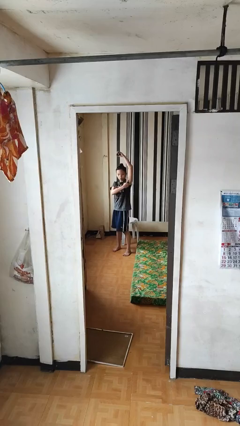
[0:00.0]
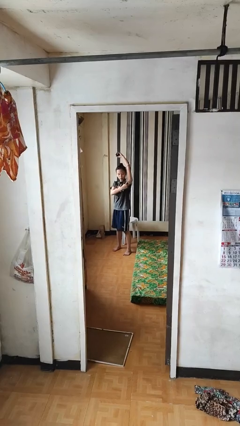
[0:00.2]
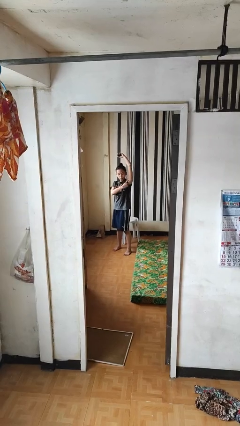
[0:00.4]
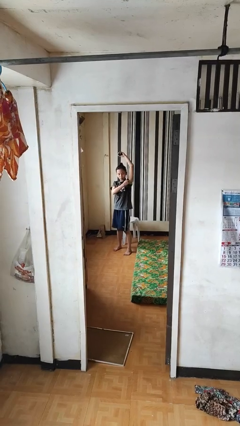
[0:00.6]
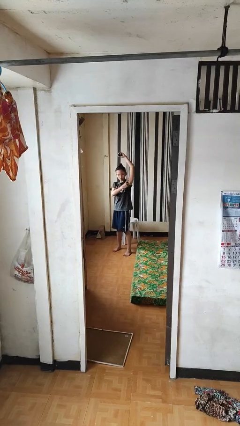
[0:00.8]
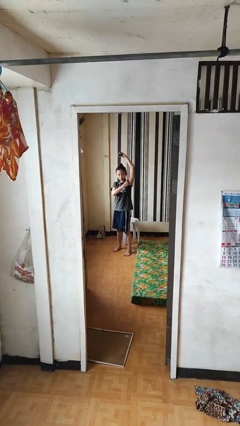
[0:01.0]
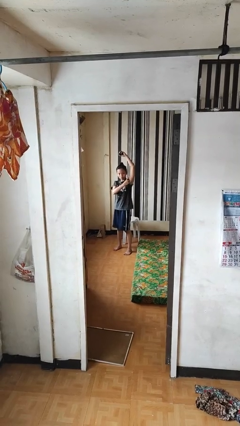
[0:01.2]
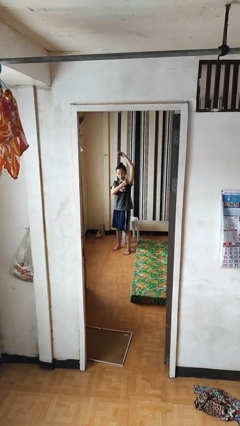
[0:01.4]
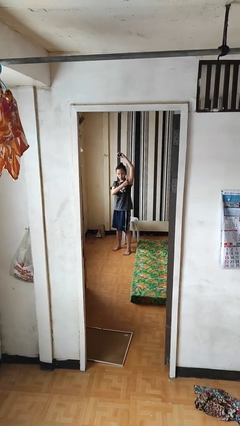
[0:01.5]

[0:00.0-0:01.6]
person applies deodorant

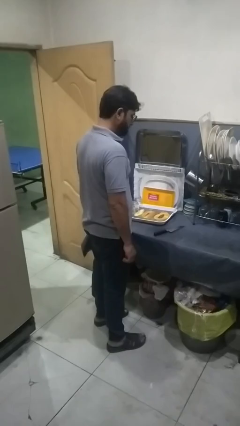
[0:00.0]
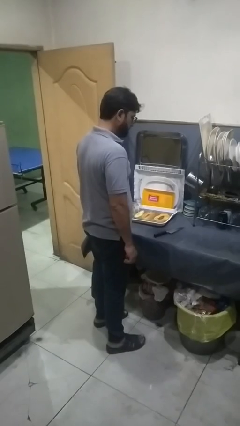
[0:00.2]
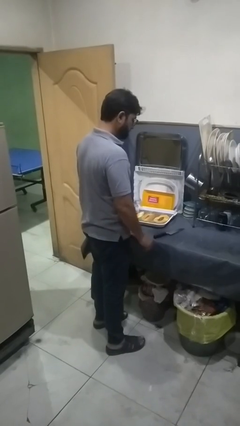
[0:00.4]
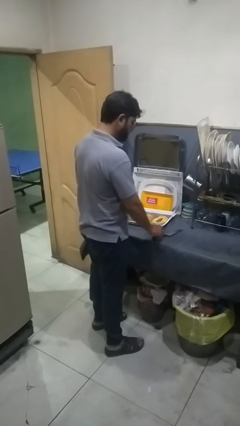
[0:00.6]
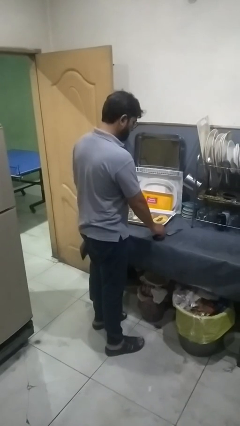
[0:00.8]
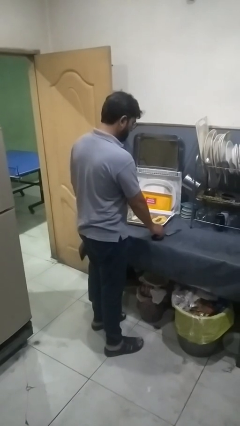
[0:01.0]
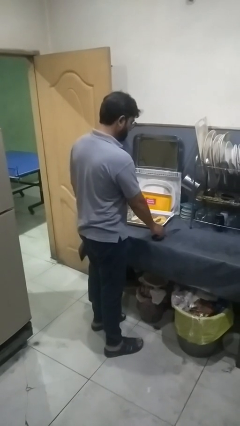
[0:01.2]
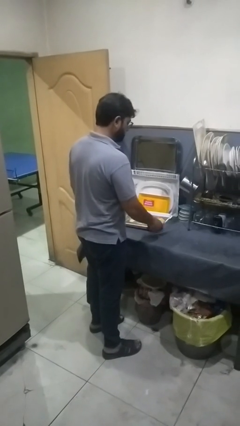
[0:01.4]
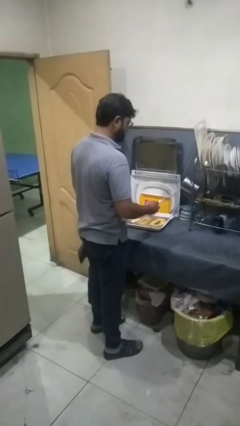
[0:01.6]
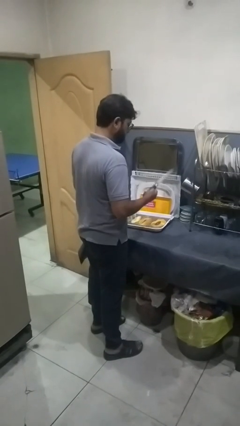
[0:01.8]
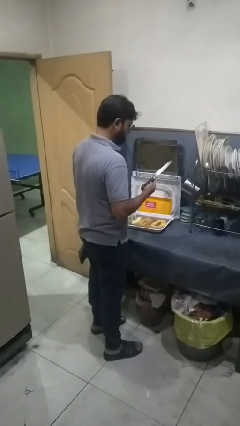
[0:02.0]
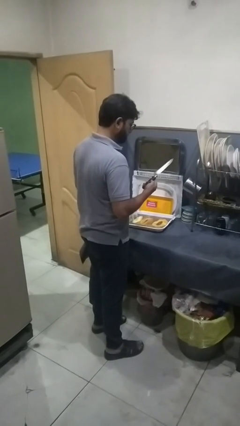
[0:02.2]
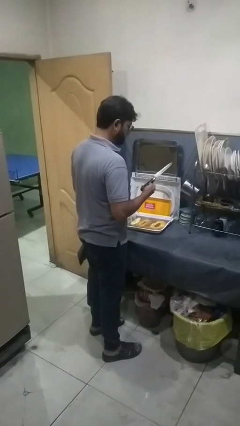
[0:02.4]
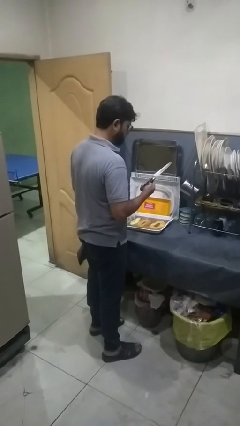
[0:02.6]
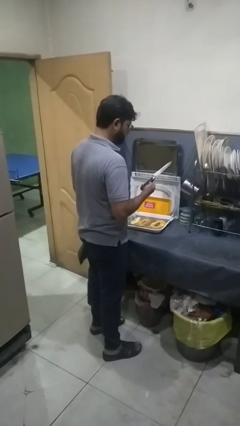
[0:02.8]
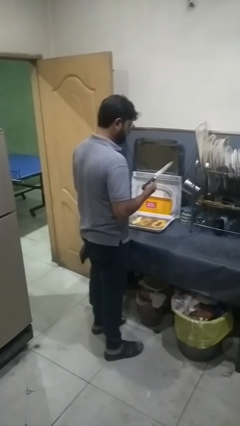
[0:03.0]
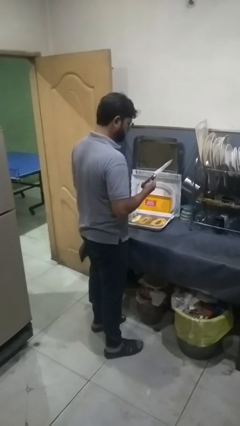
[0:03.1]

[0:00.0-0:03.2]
person picks up object from countertop

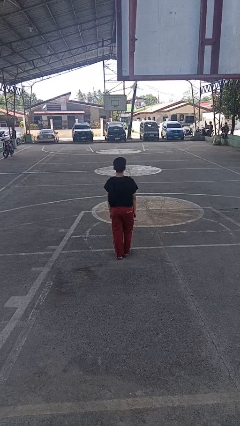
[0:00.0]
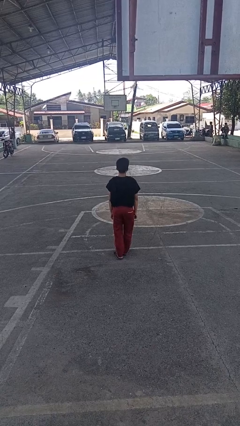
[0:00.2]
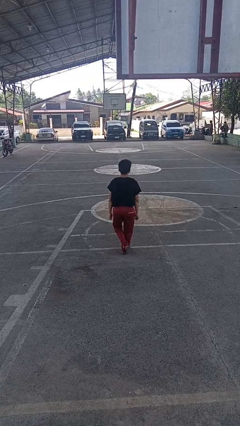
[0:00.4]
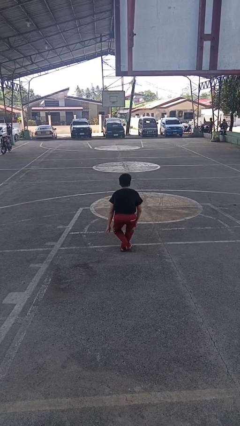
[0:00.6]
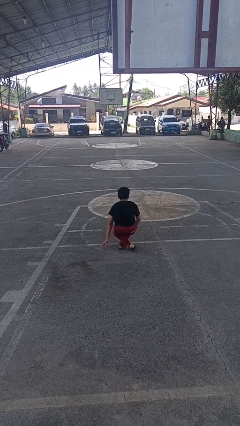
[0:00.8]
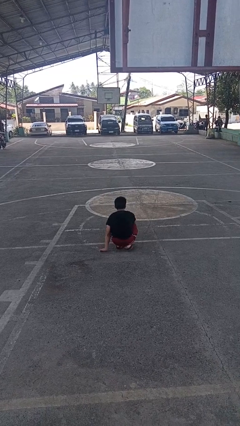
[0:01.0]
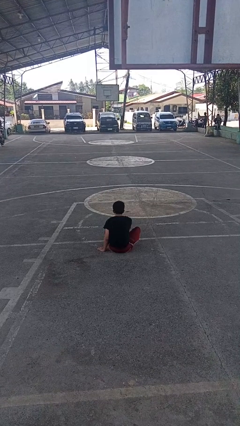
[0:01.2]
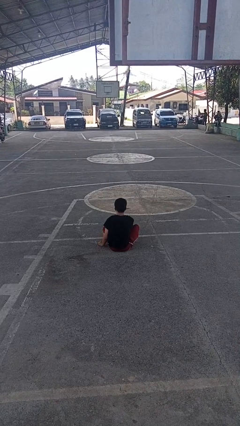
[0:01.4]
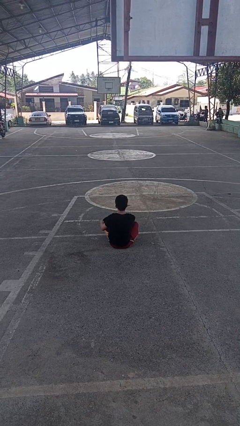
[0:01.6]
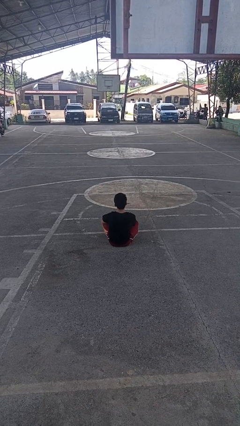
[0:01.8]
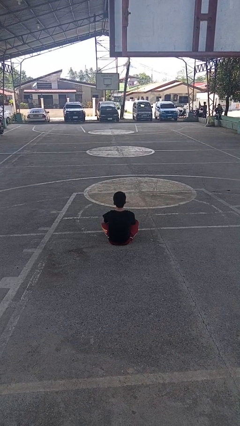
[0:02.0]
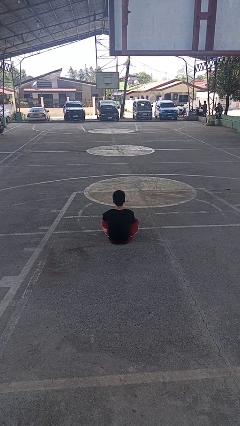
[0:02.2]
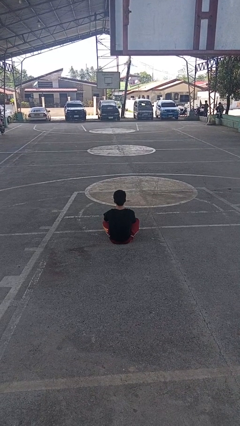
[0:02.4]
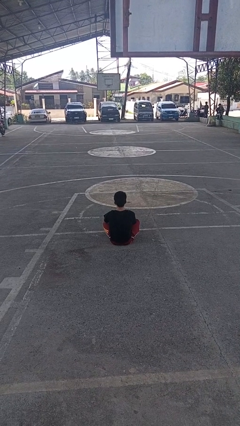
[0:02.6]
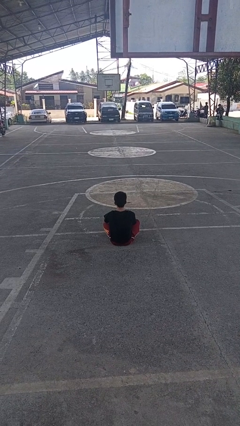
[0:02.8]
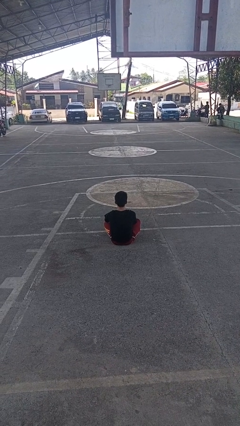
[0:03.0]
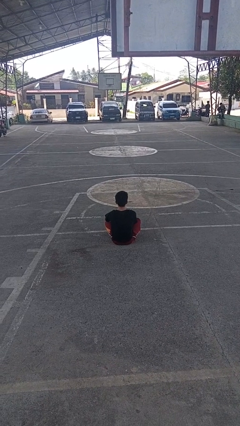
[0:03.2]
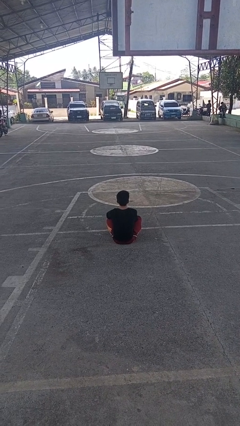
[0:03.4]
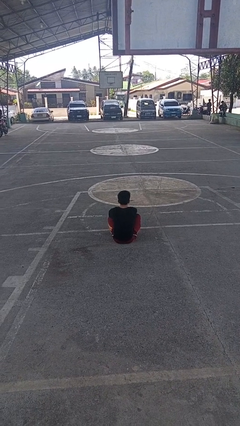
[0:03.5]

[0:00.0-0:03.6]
person sits crisscross

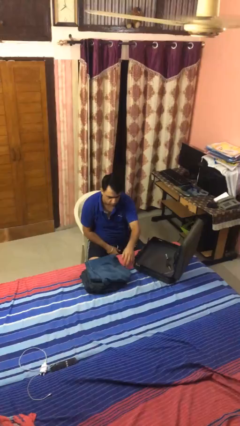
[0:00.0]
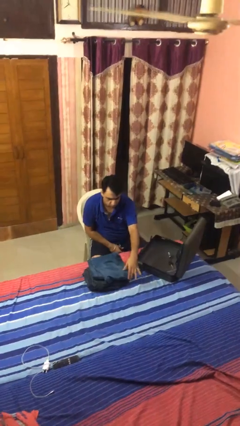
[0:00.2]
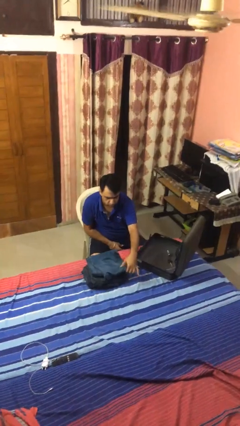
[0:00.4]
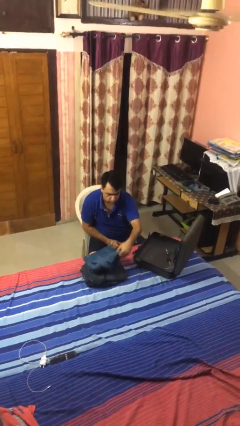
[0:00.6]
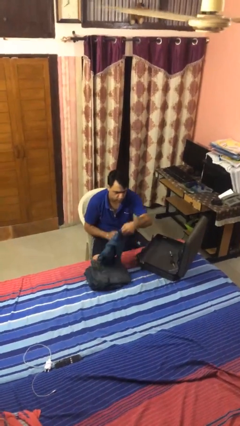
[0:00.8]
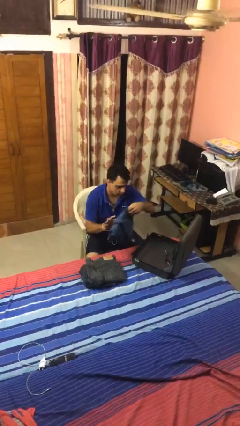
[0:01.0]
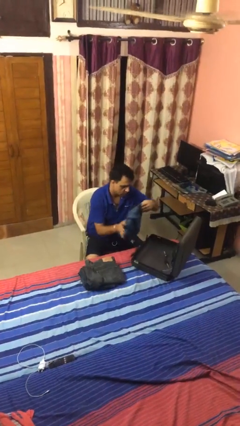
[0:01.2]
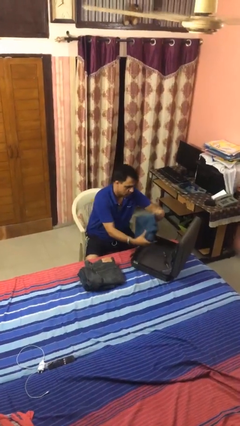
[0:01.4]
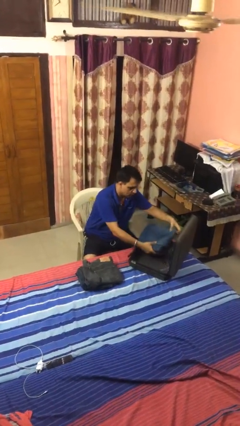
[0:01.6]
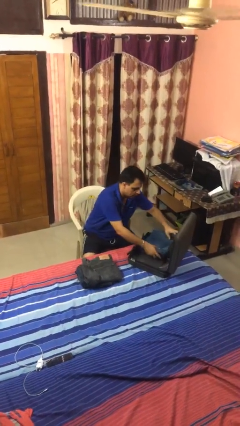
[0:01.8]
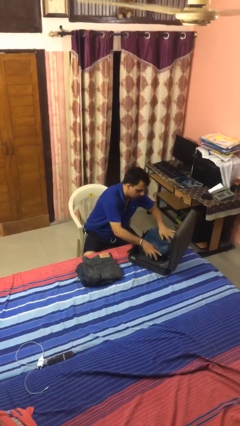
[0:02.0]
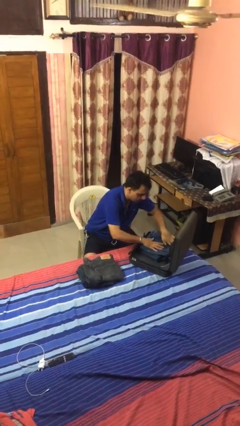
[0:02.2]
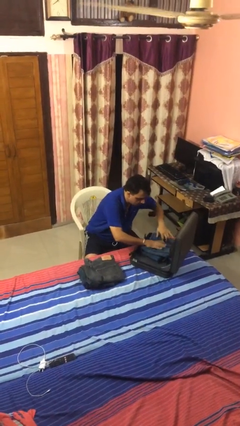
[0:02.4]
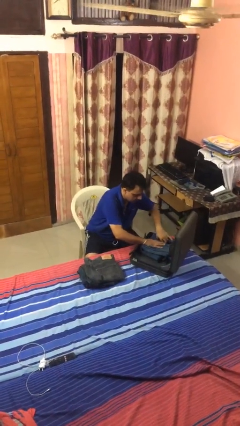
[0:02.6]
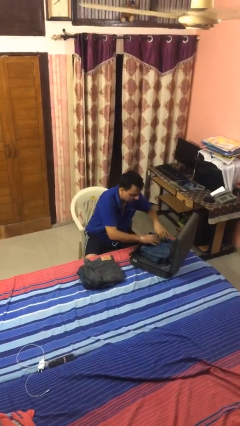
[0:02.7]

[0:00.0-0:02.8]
person loads clothes into suitcase

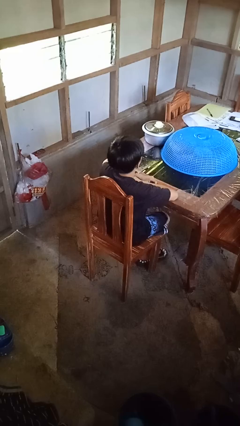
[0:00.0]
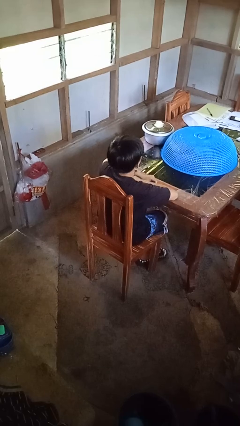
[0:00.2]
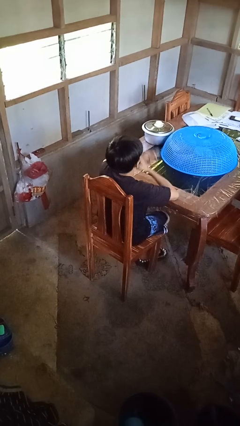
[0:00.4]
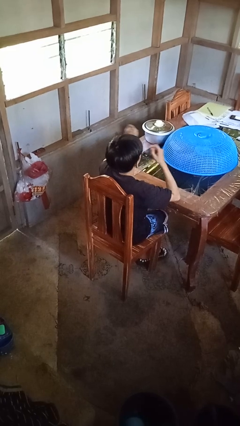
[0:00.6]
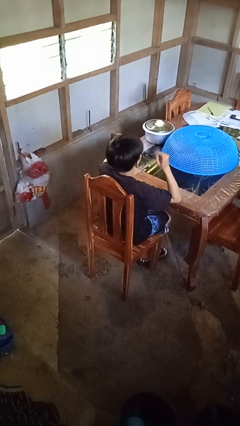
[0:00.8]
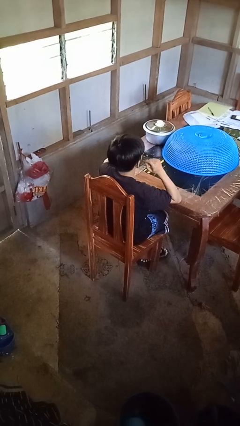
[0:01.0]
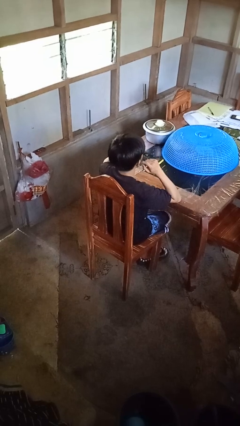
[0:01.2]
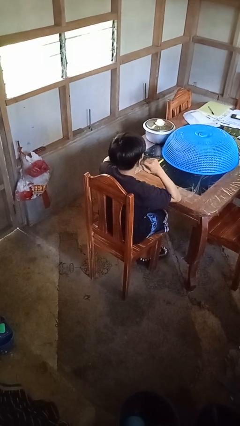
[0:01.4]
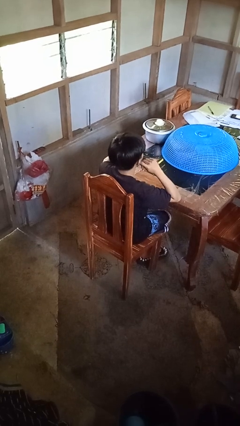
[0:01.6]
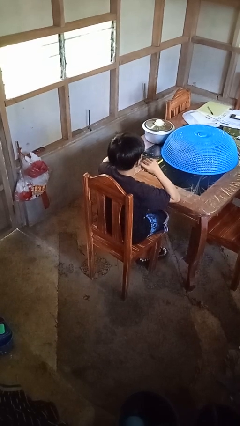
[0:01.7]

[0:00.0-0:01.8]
person puts fingers in ear

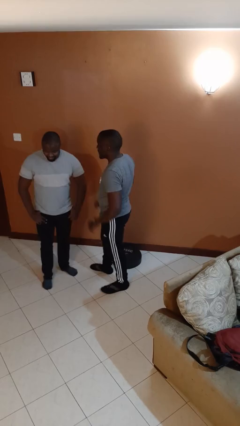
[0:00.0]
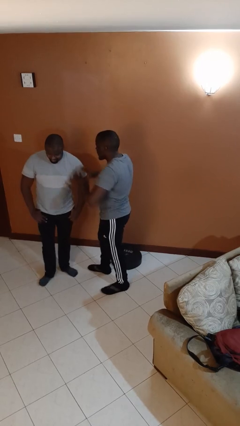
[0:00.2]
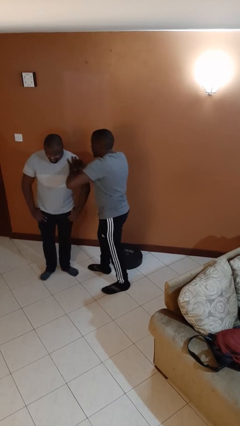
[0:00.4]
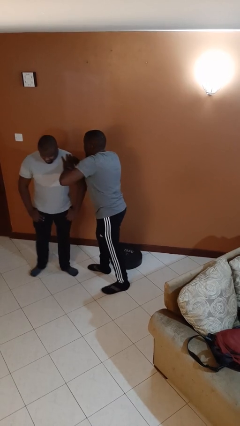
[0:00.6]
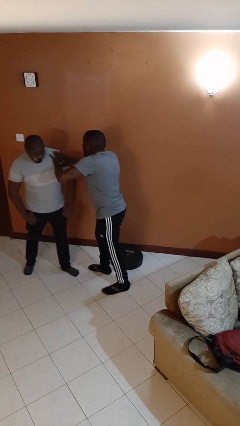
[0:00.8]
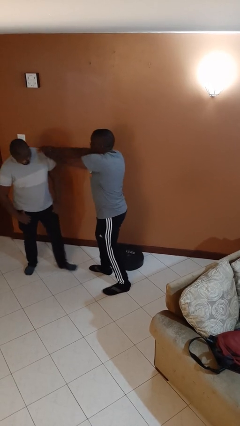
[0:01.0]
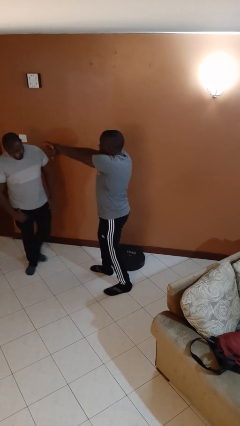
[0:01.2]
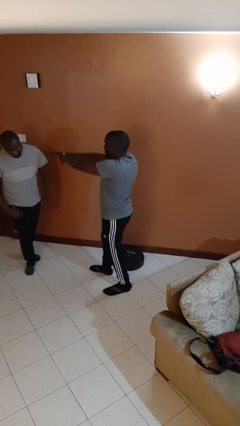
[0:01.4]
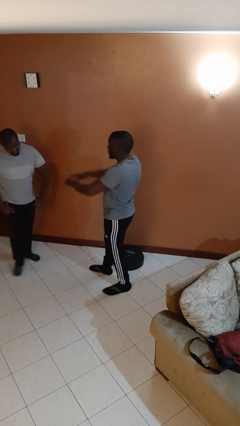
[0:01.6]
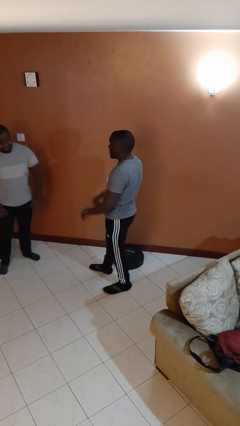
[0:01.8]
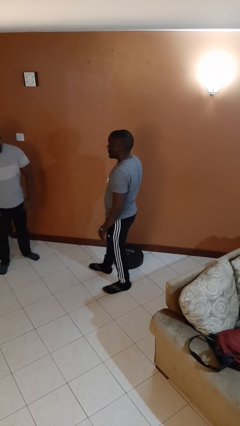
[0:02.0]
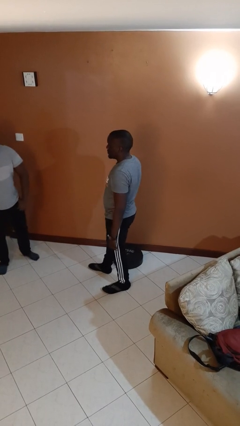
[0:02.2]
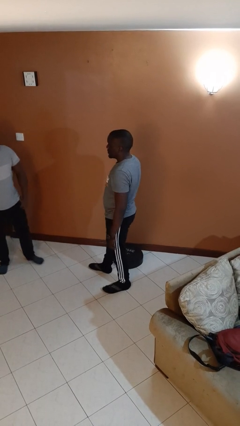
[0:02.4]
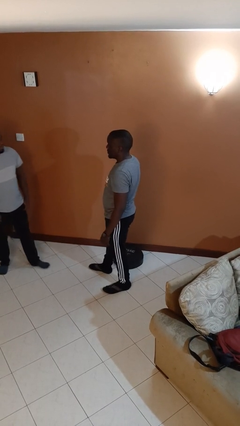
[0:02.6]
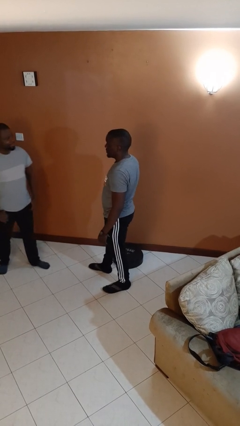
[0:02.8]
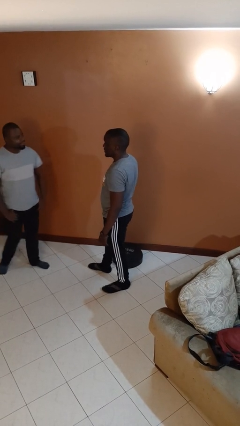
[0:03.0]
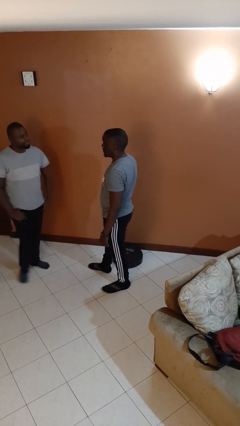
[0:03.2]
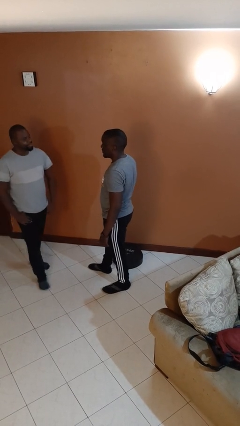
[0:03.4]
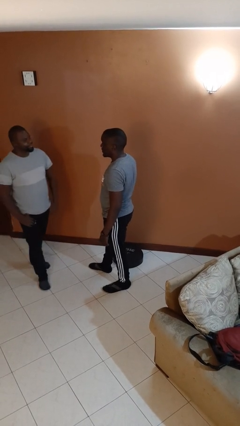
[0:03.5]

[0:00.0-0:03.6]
person shoves person

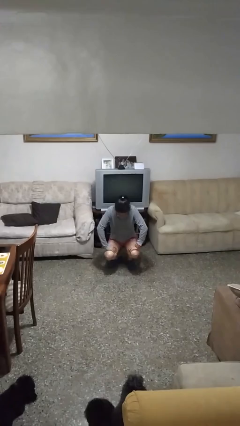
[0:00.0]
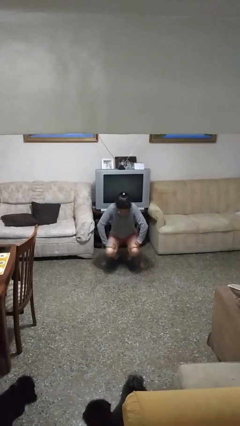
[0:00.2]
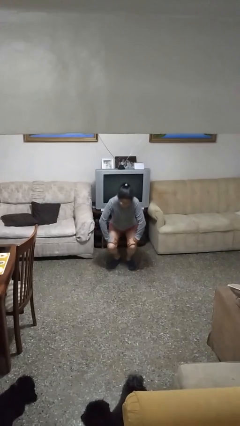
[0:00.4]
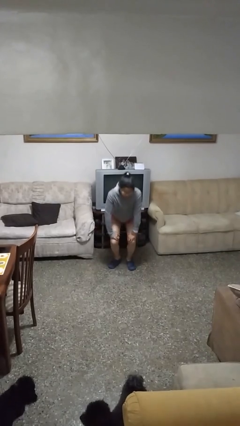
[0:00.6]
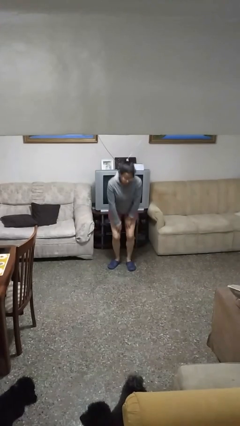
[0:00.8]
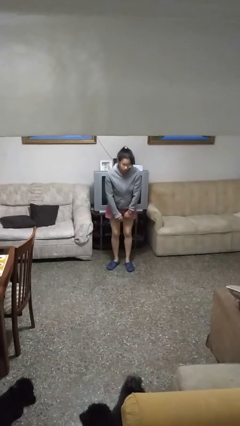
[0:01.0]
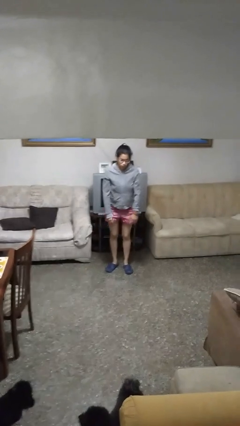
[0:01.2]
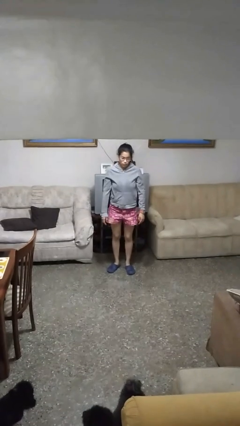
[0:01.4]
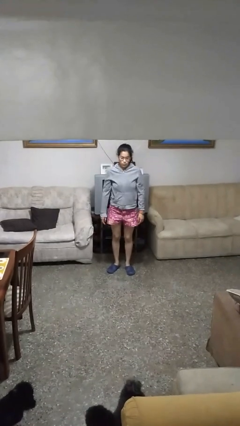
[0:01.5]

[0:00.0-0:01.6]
person stands up
